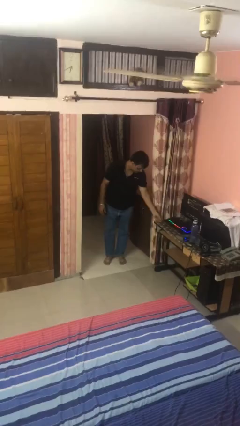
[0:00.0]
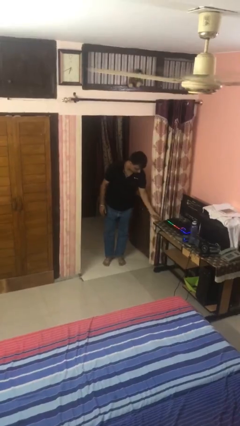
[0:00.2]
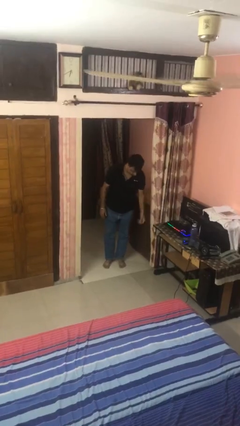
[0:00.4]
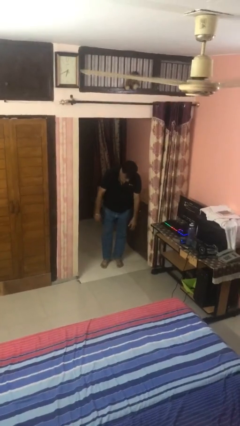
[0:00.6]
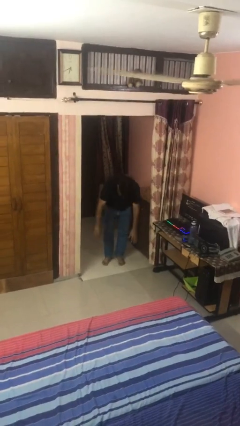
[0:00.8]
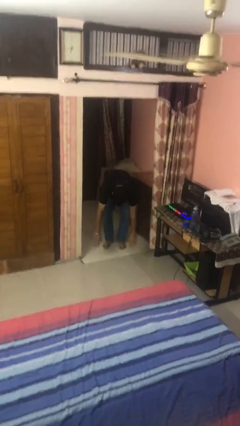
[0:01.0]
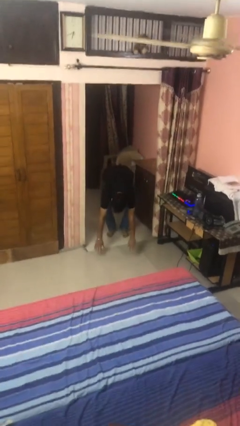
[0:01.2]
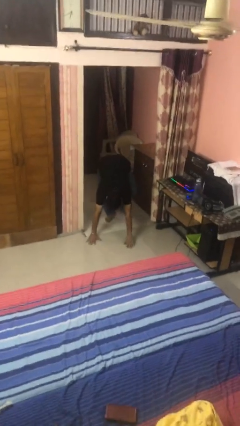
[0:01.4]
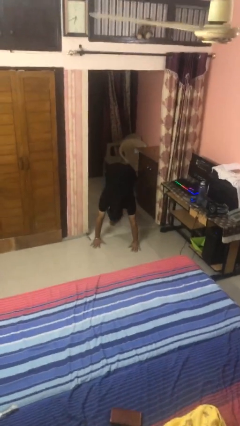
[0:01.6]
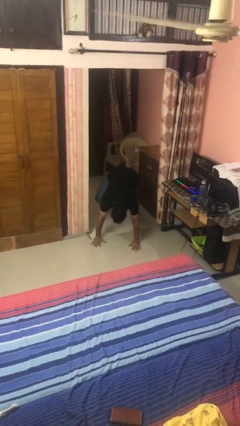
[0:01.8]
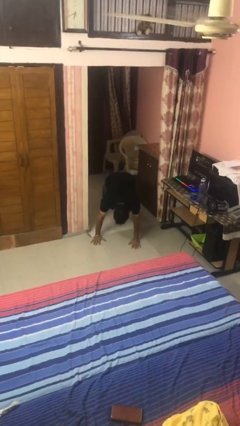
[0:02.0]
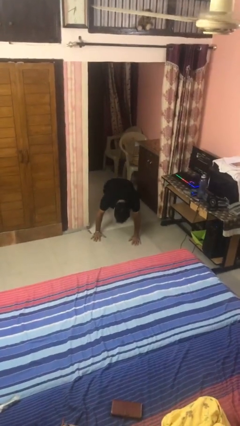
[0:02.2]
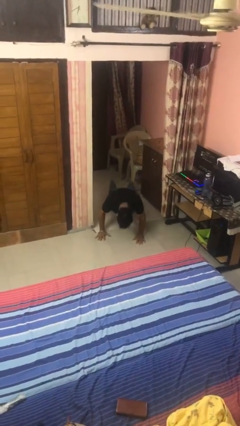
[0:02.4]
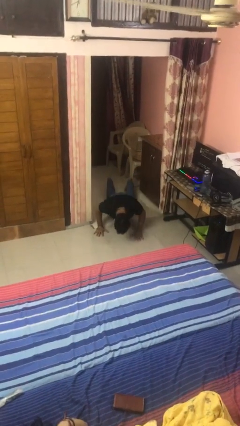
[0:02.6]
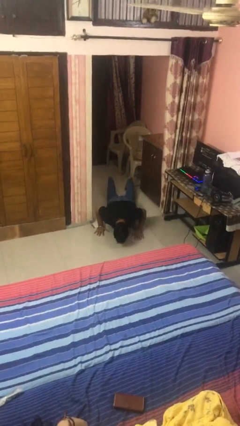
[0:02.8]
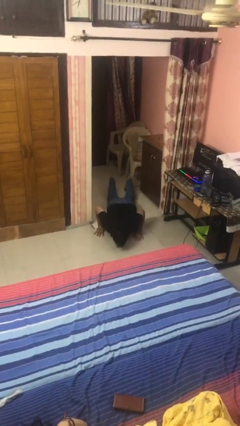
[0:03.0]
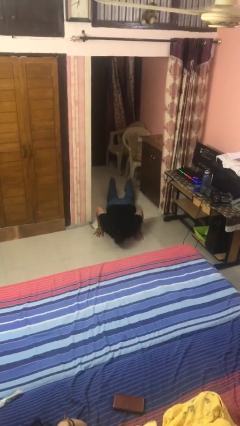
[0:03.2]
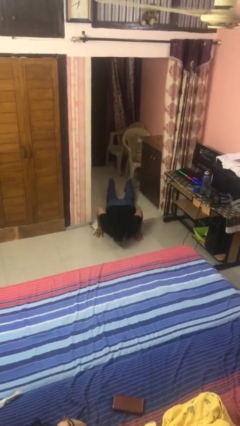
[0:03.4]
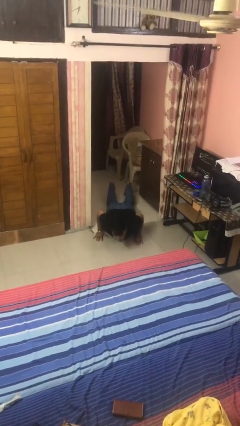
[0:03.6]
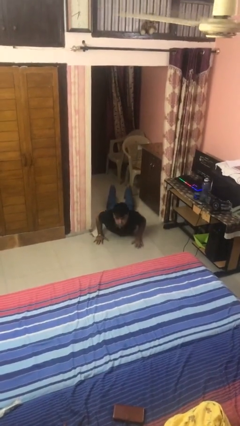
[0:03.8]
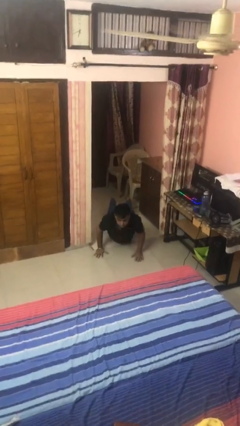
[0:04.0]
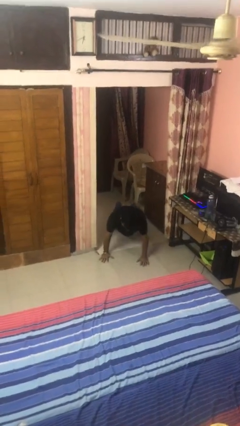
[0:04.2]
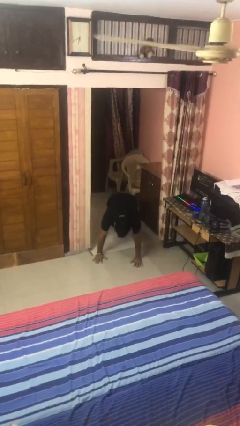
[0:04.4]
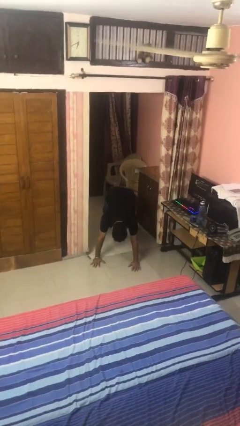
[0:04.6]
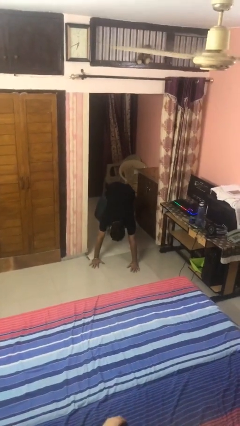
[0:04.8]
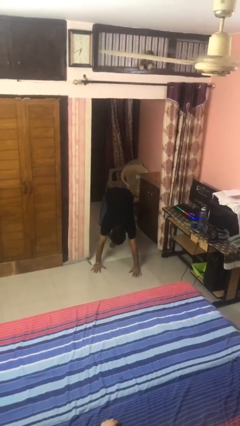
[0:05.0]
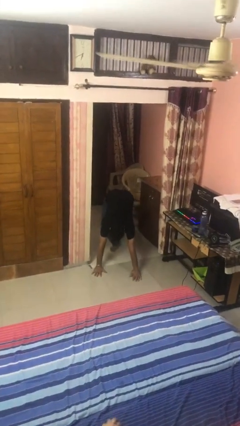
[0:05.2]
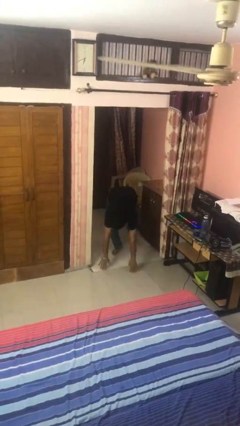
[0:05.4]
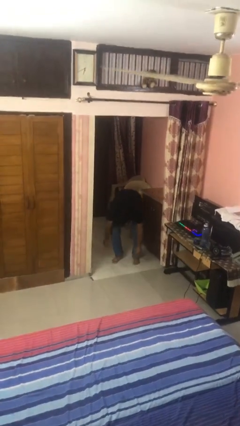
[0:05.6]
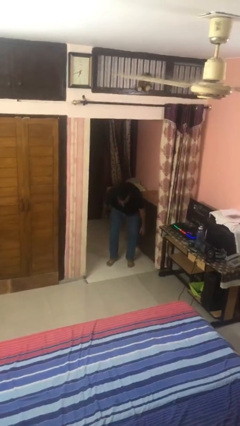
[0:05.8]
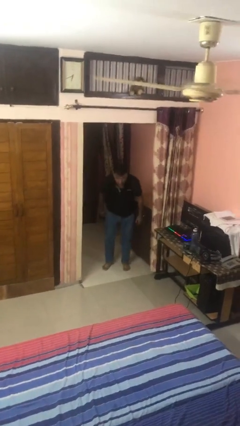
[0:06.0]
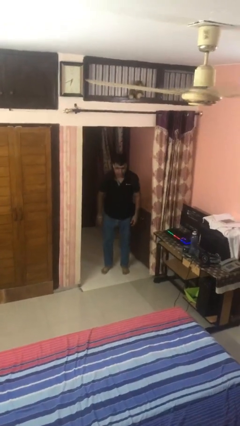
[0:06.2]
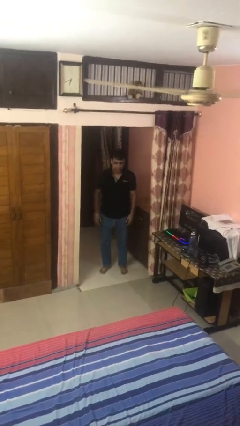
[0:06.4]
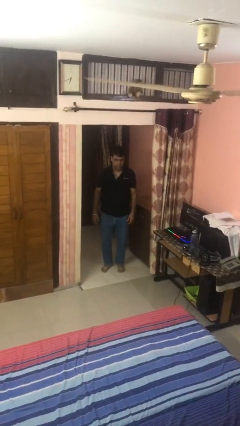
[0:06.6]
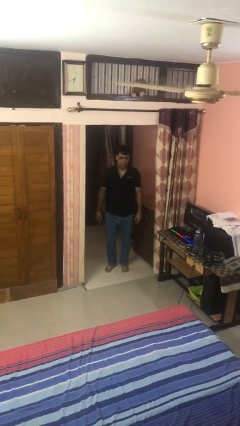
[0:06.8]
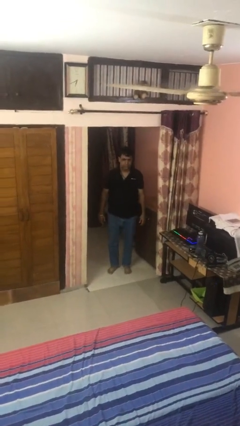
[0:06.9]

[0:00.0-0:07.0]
person exercises with pushup

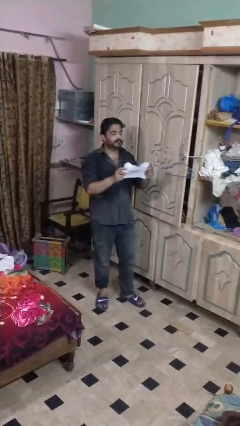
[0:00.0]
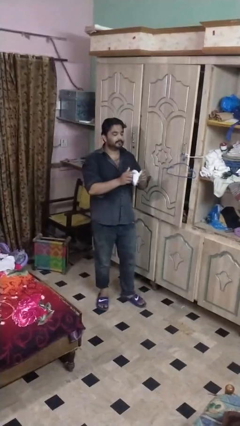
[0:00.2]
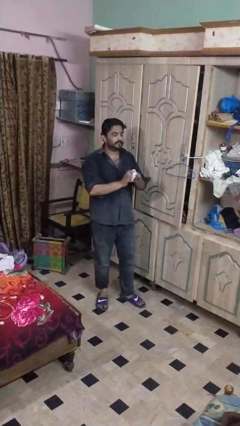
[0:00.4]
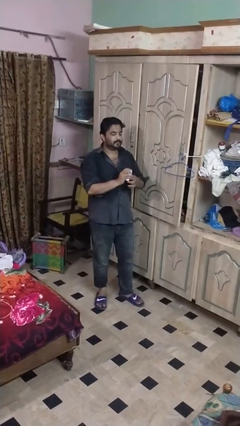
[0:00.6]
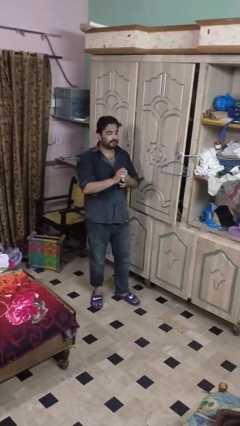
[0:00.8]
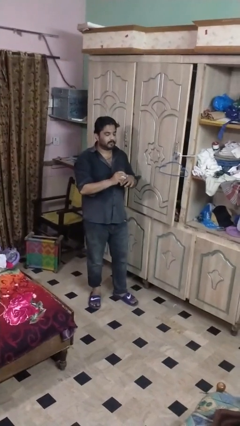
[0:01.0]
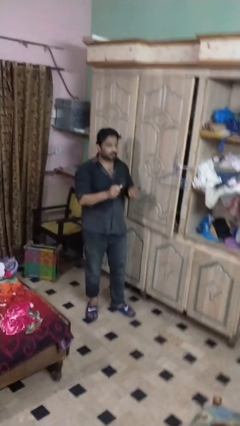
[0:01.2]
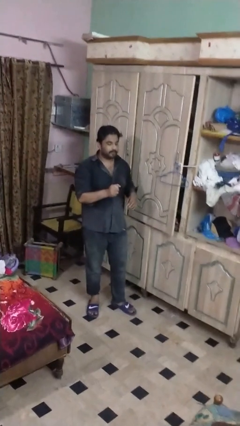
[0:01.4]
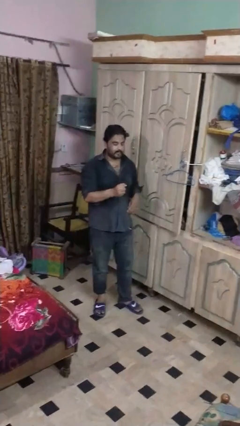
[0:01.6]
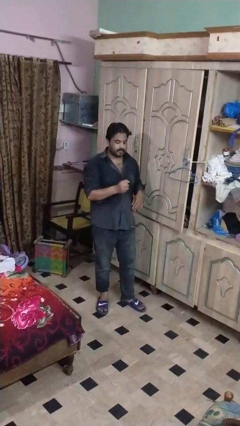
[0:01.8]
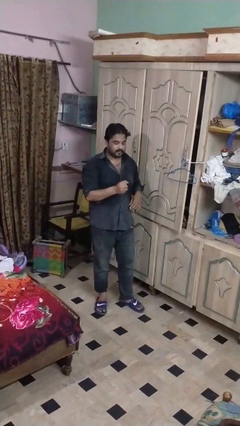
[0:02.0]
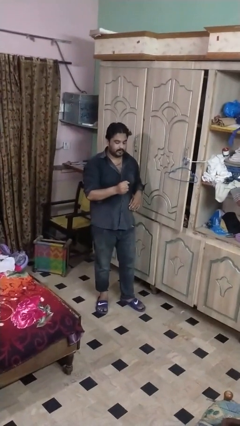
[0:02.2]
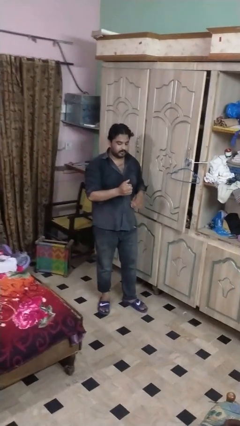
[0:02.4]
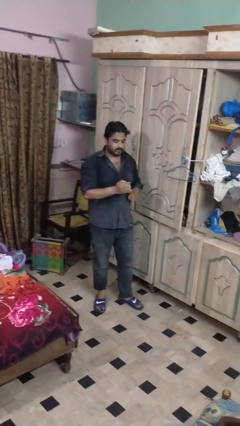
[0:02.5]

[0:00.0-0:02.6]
person crumples paper

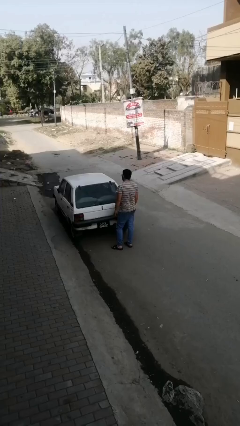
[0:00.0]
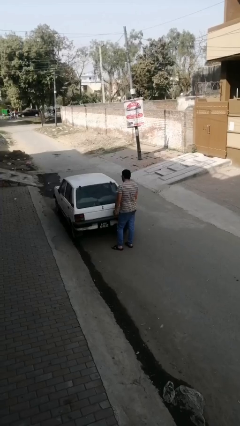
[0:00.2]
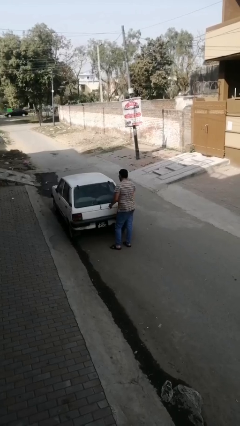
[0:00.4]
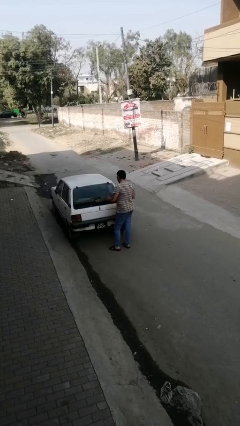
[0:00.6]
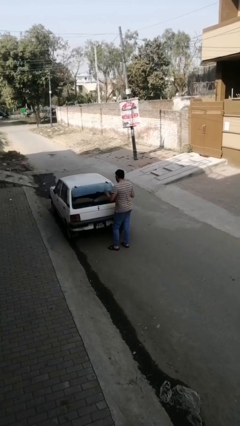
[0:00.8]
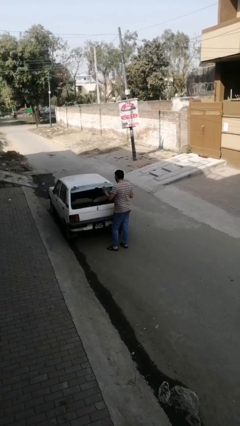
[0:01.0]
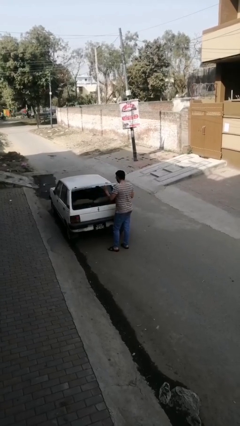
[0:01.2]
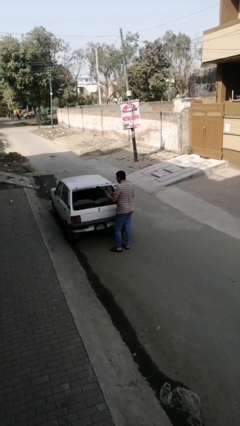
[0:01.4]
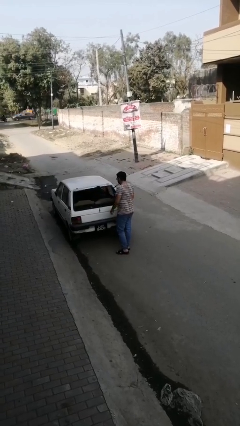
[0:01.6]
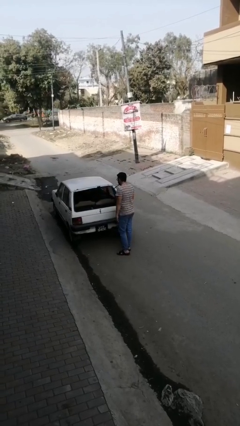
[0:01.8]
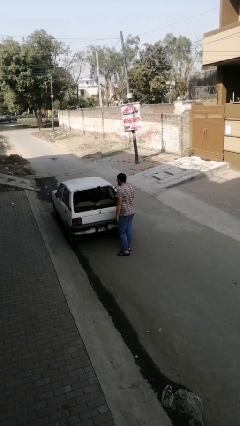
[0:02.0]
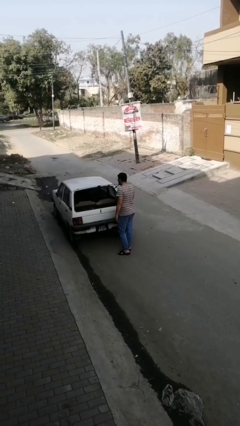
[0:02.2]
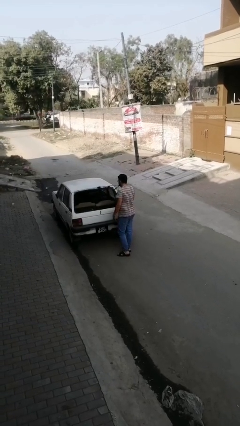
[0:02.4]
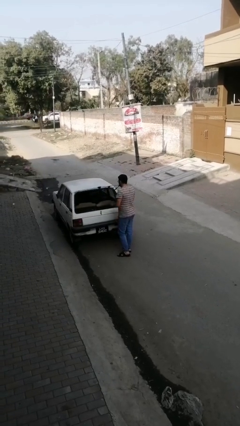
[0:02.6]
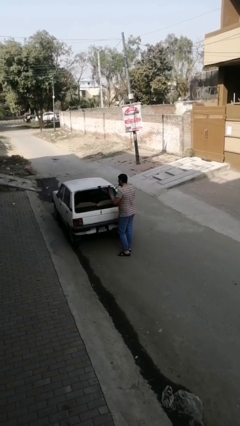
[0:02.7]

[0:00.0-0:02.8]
person opens car trunk

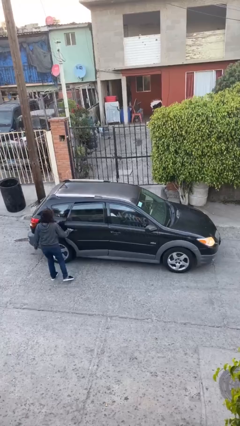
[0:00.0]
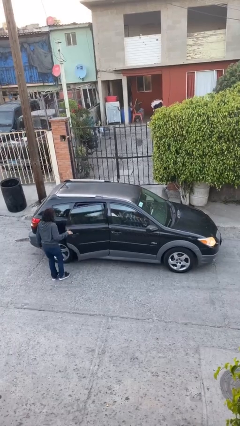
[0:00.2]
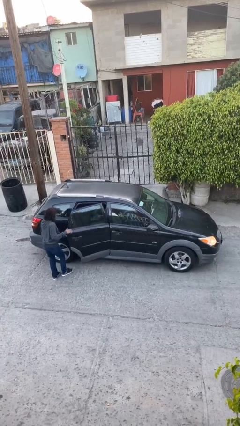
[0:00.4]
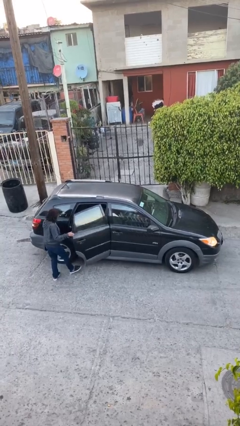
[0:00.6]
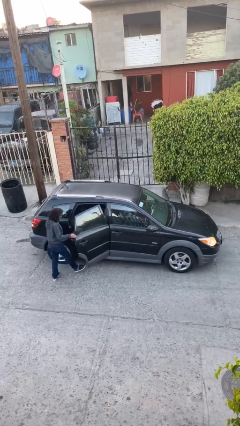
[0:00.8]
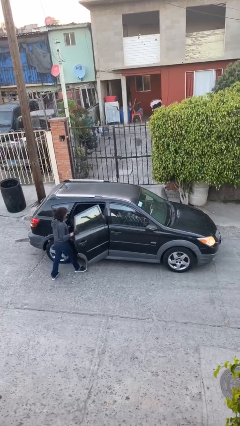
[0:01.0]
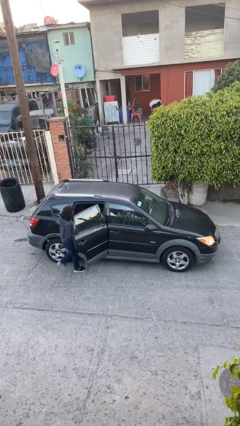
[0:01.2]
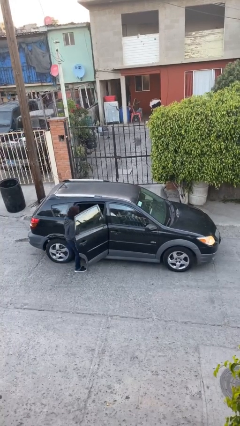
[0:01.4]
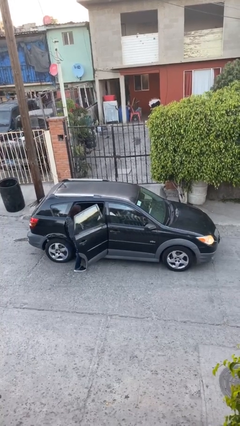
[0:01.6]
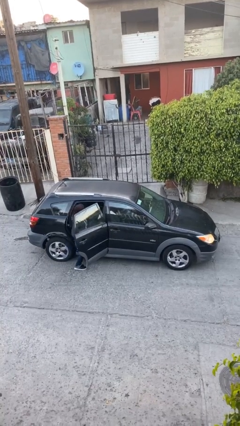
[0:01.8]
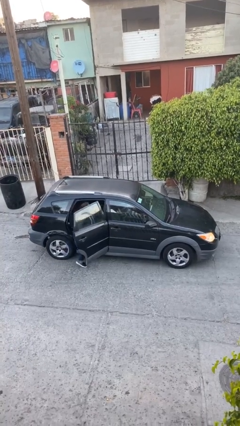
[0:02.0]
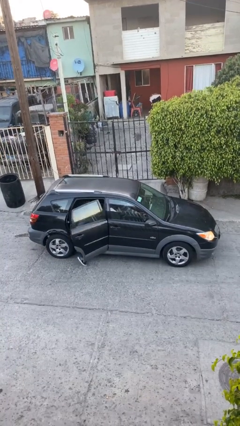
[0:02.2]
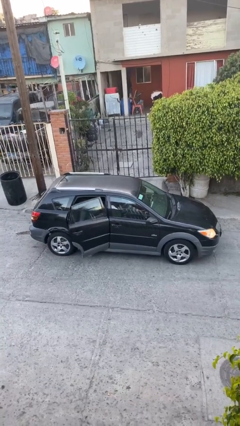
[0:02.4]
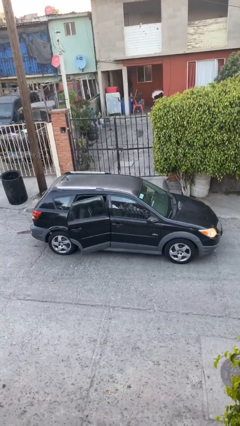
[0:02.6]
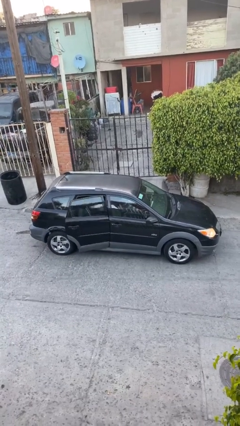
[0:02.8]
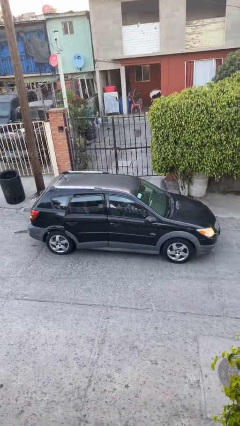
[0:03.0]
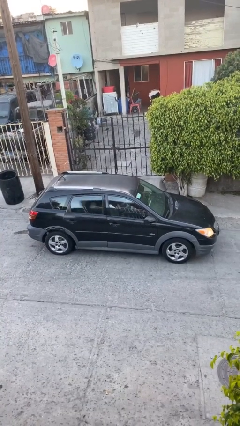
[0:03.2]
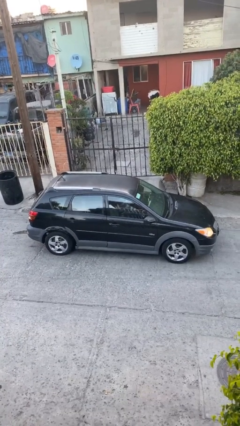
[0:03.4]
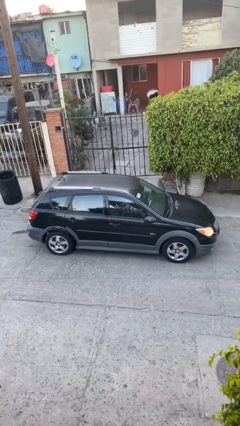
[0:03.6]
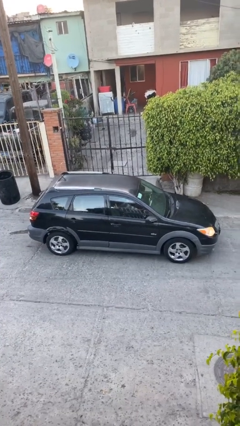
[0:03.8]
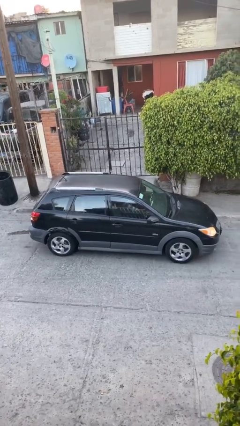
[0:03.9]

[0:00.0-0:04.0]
car picks up person

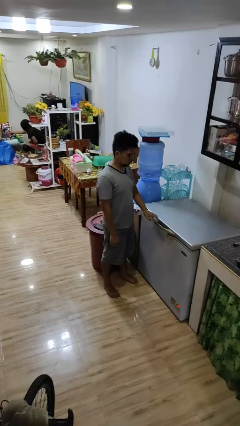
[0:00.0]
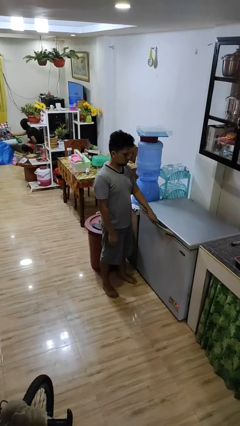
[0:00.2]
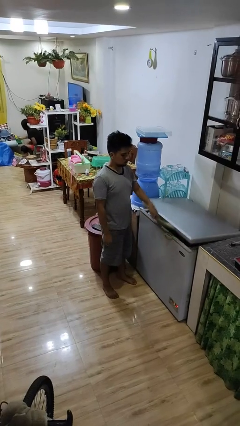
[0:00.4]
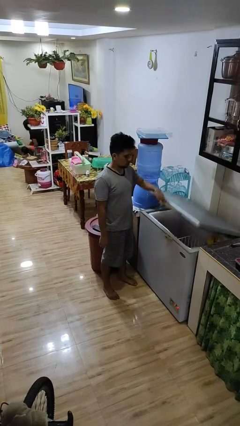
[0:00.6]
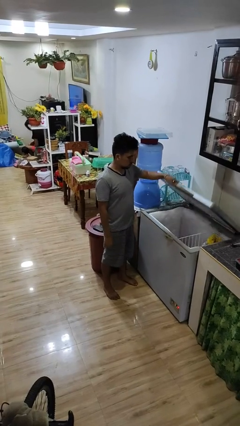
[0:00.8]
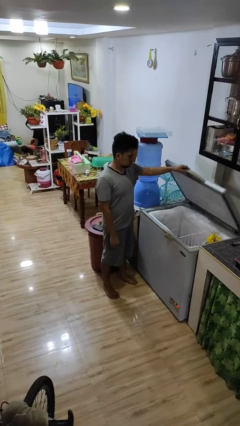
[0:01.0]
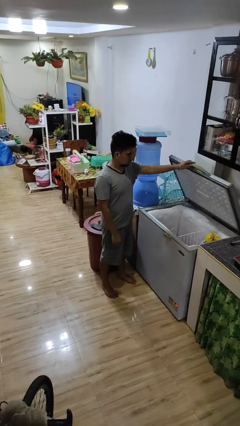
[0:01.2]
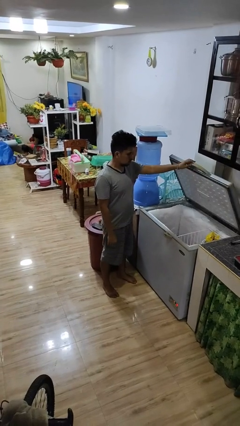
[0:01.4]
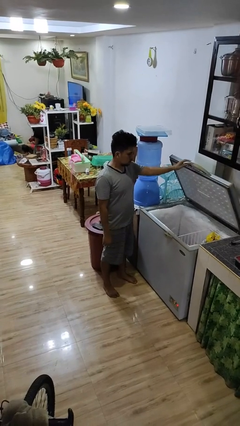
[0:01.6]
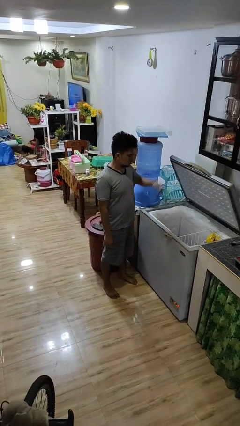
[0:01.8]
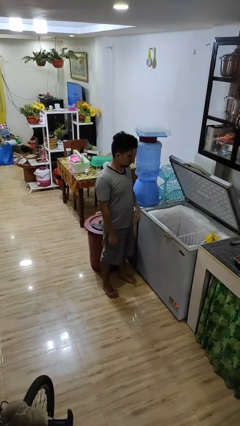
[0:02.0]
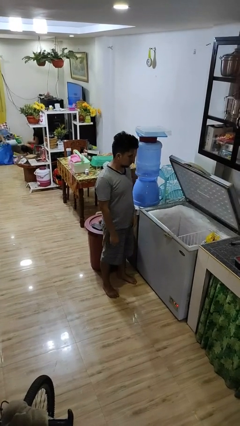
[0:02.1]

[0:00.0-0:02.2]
person opens refrigerator
